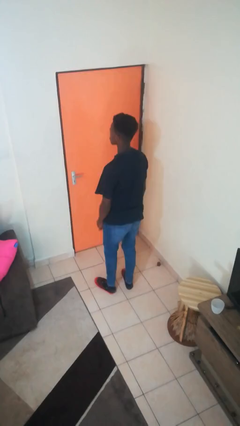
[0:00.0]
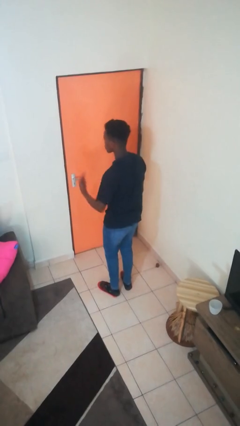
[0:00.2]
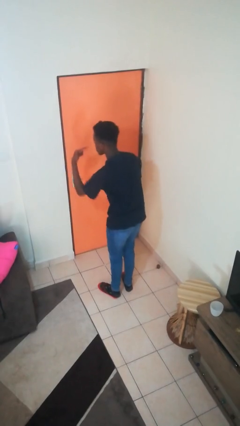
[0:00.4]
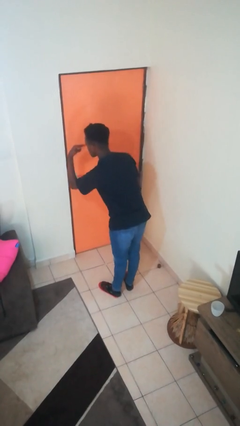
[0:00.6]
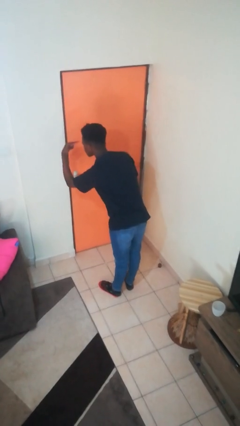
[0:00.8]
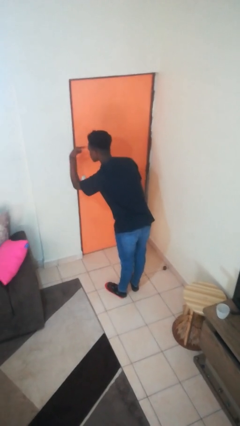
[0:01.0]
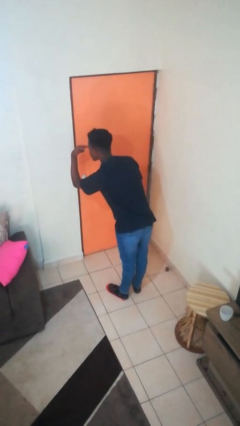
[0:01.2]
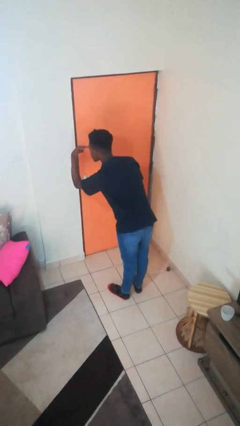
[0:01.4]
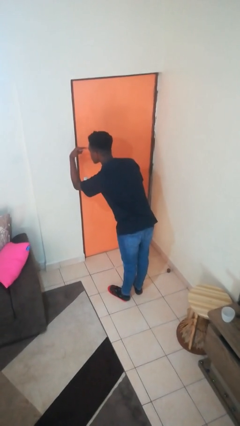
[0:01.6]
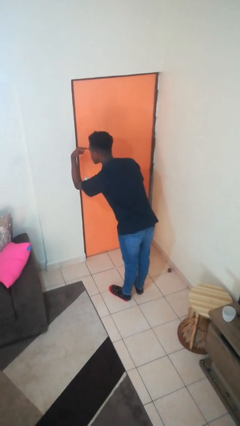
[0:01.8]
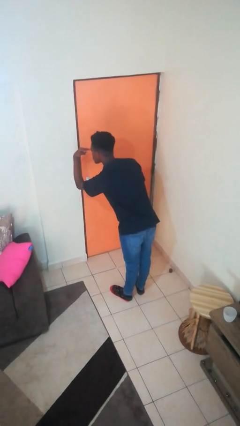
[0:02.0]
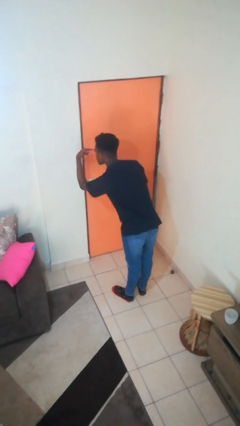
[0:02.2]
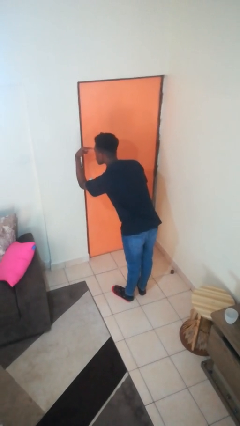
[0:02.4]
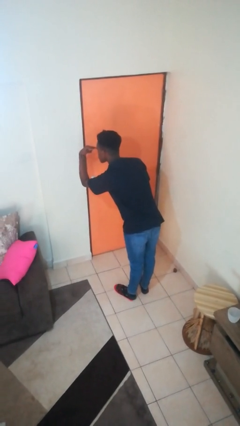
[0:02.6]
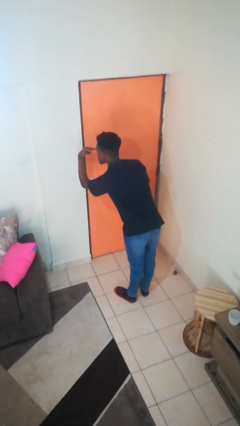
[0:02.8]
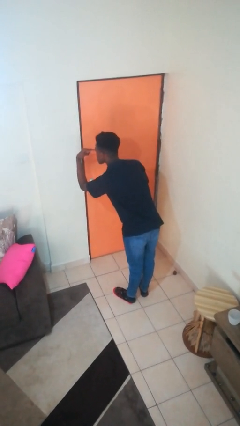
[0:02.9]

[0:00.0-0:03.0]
person gestures watch closely

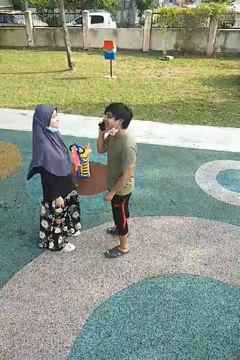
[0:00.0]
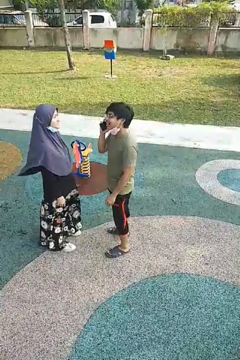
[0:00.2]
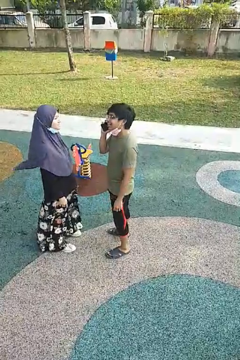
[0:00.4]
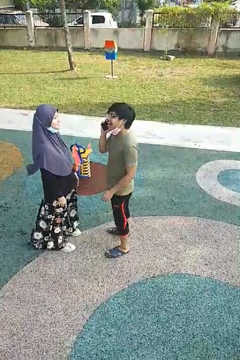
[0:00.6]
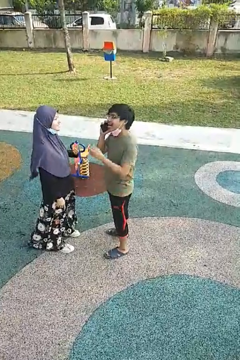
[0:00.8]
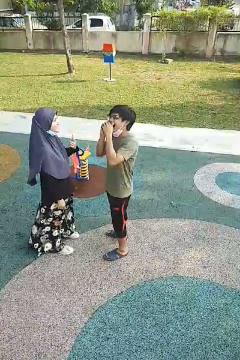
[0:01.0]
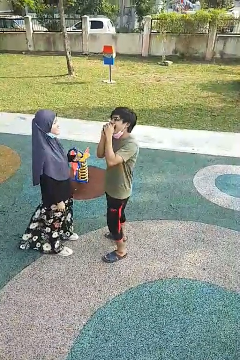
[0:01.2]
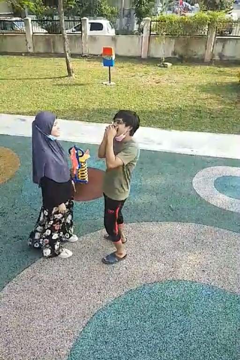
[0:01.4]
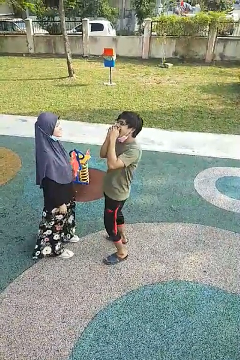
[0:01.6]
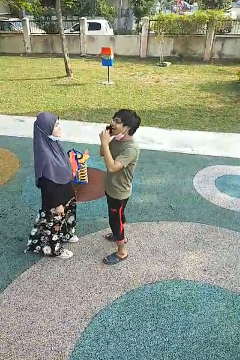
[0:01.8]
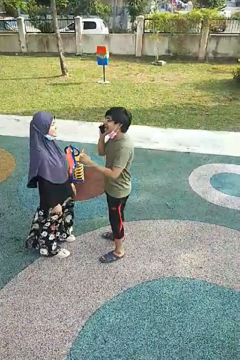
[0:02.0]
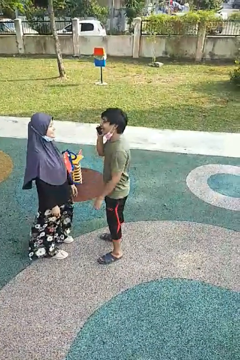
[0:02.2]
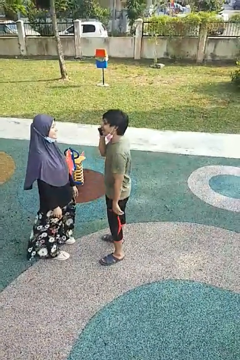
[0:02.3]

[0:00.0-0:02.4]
person laughs with person

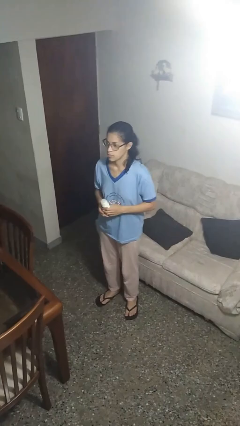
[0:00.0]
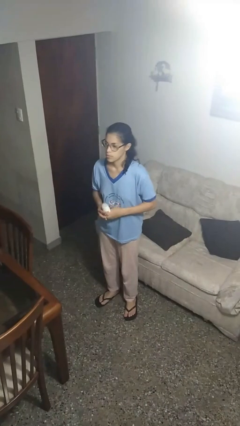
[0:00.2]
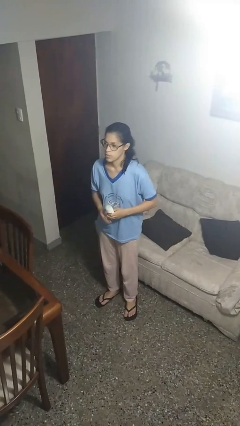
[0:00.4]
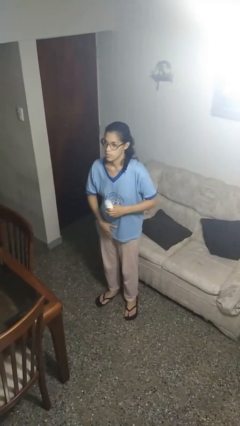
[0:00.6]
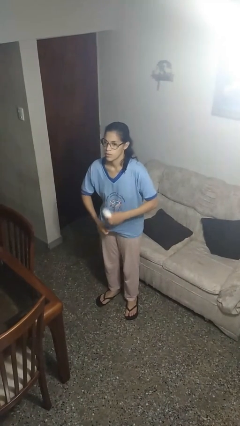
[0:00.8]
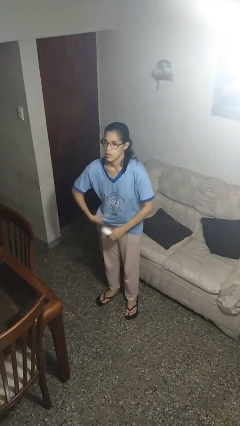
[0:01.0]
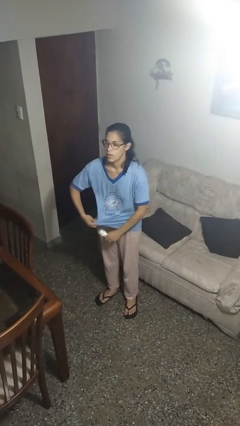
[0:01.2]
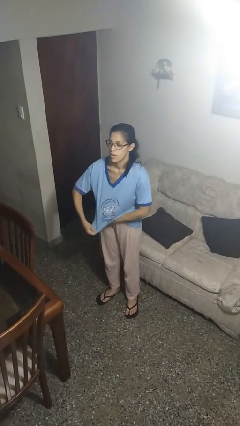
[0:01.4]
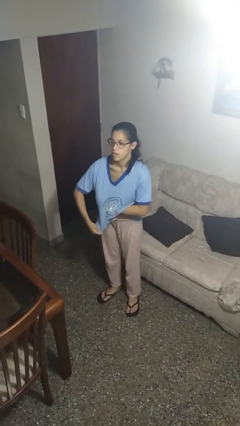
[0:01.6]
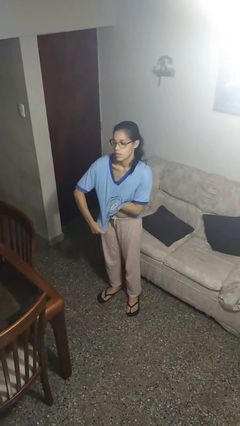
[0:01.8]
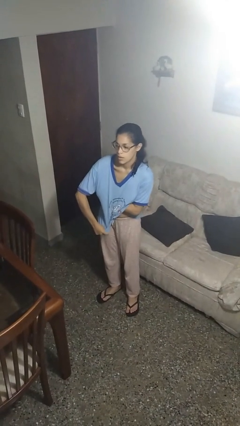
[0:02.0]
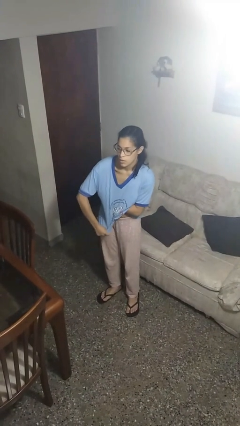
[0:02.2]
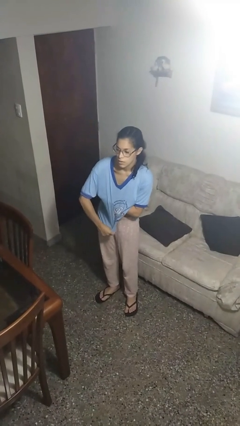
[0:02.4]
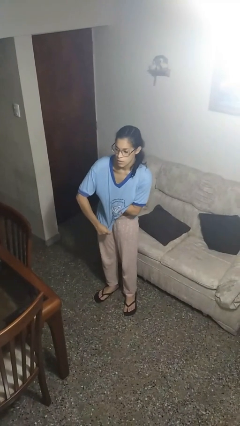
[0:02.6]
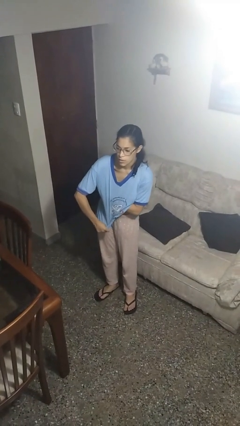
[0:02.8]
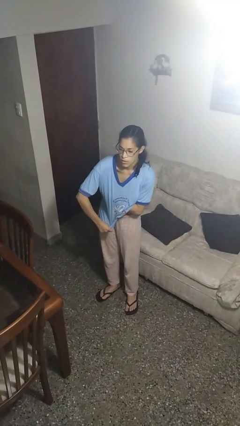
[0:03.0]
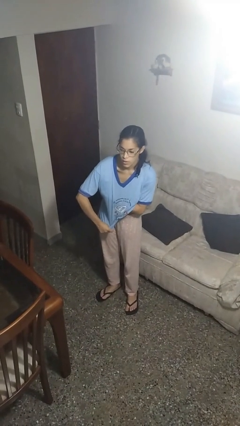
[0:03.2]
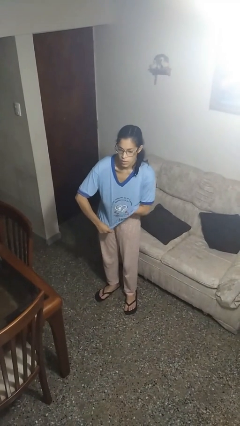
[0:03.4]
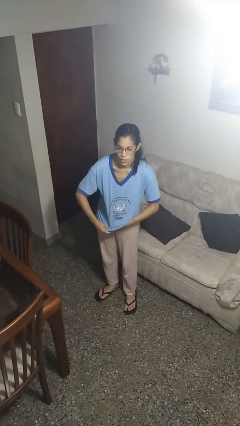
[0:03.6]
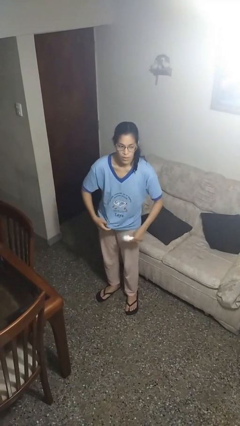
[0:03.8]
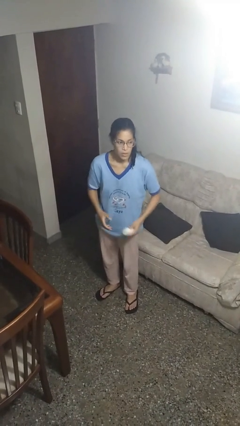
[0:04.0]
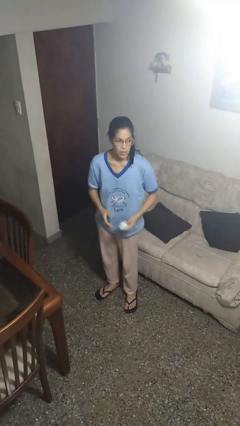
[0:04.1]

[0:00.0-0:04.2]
person applies deodorant

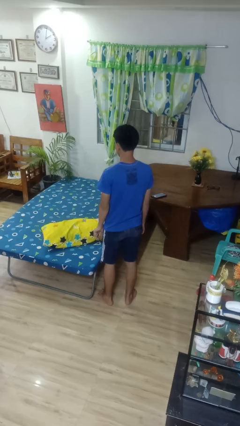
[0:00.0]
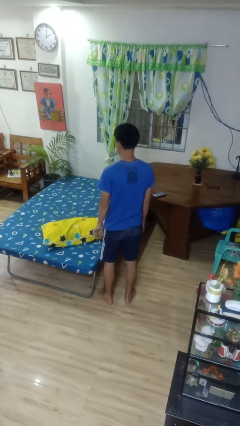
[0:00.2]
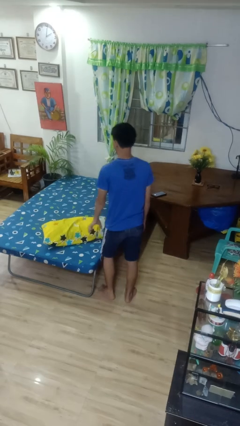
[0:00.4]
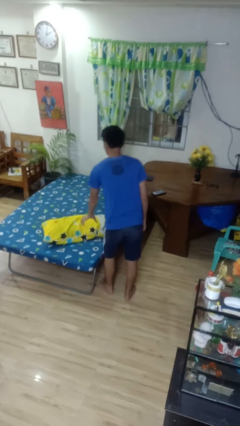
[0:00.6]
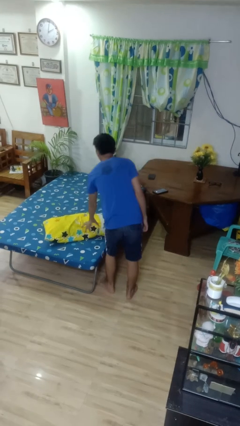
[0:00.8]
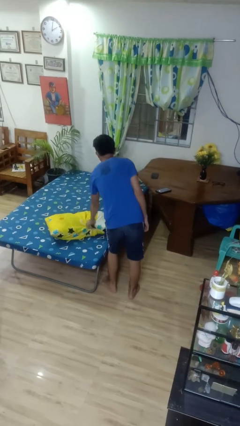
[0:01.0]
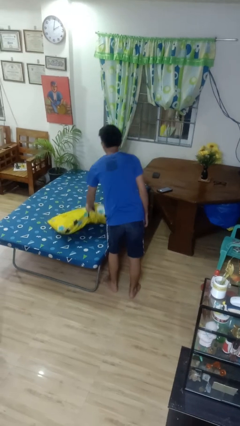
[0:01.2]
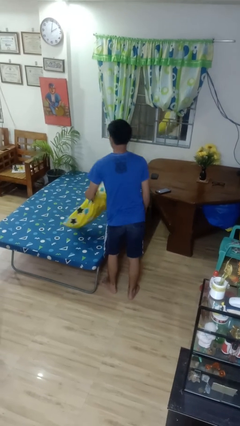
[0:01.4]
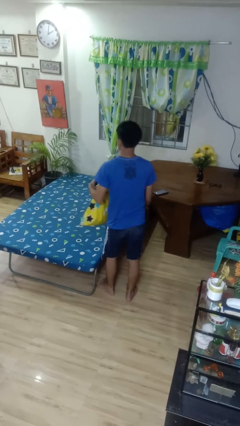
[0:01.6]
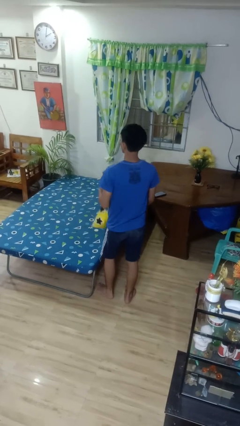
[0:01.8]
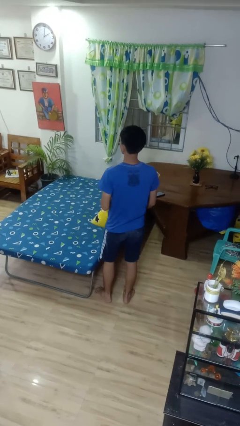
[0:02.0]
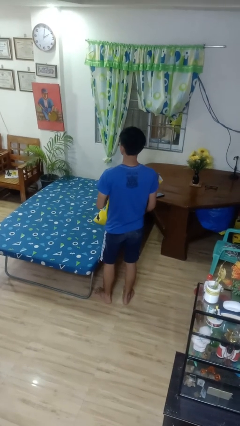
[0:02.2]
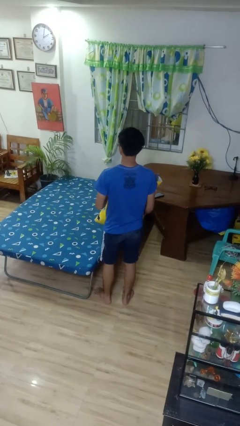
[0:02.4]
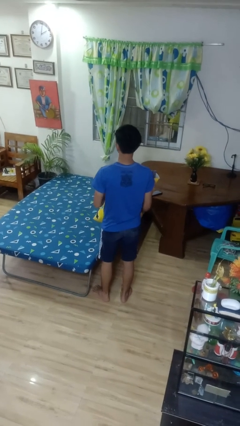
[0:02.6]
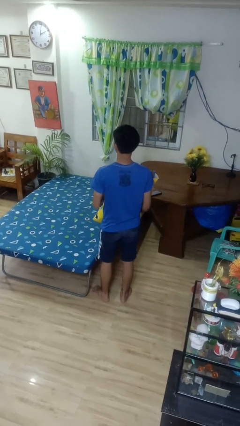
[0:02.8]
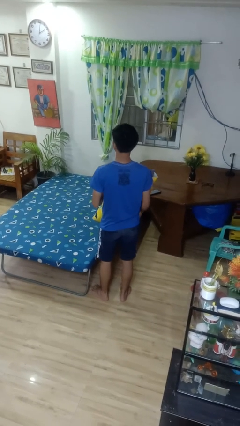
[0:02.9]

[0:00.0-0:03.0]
person picks up object from bed

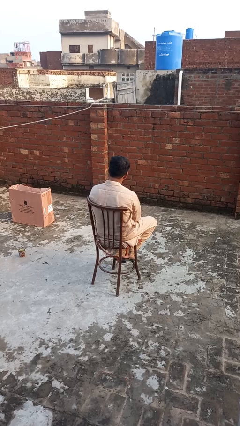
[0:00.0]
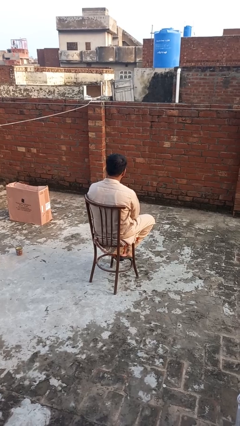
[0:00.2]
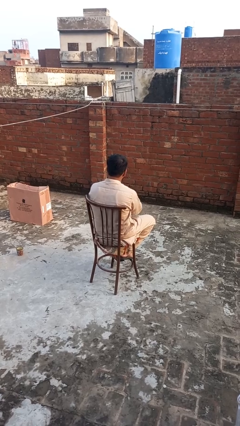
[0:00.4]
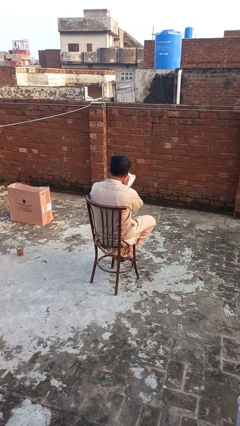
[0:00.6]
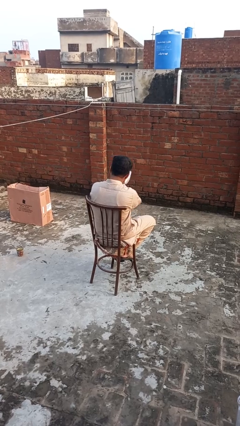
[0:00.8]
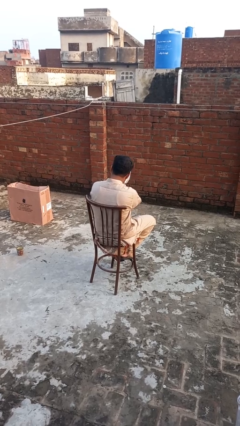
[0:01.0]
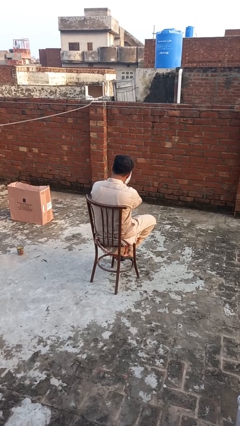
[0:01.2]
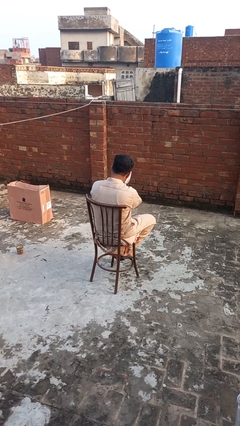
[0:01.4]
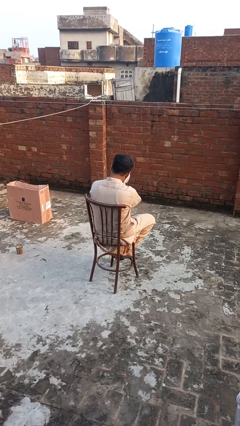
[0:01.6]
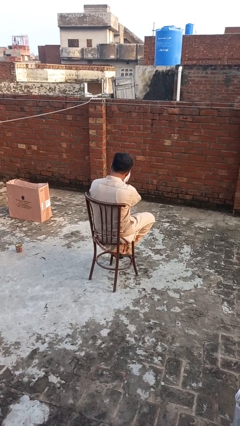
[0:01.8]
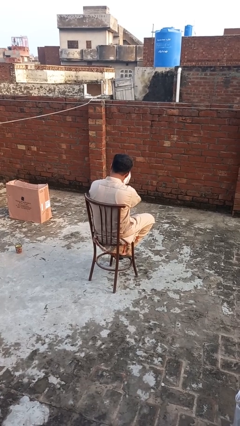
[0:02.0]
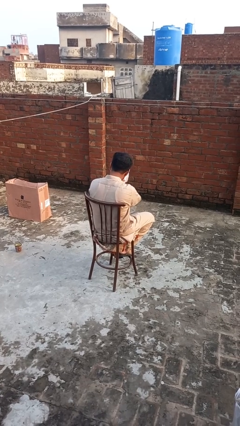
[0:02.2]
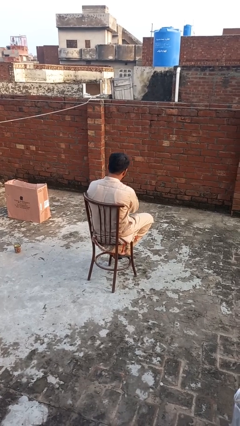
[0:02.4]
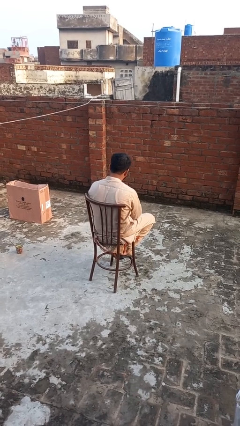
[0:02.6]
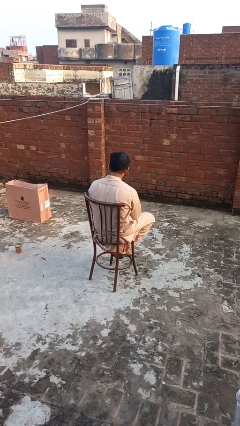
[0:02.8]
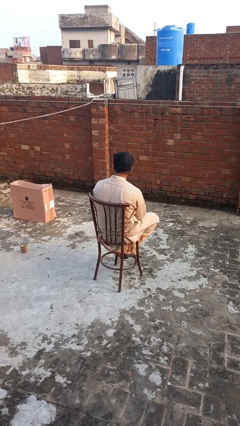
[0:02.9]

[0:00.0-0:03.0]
person blows nose

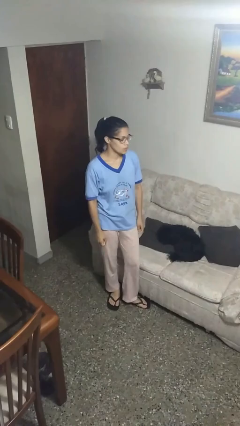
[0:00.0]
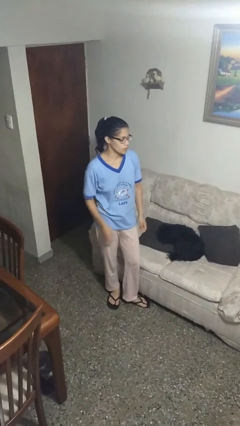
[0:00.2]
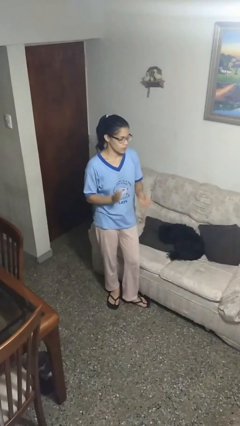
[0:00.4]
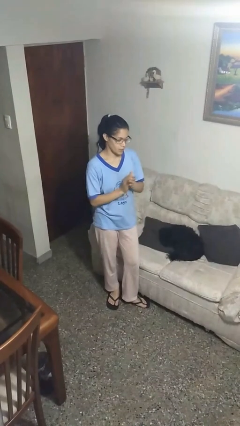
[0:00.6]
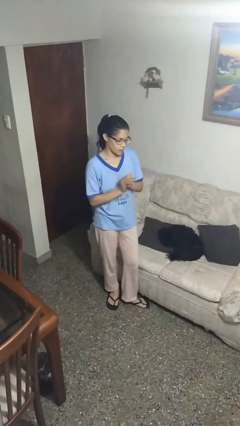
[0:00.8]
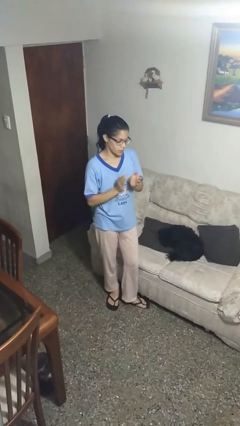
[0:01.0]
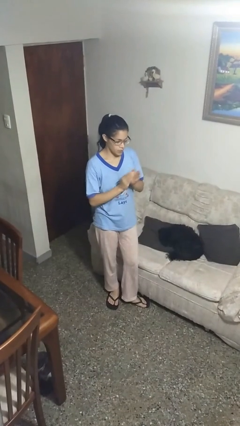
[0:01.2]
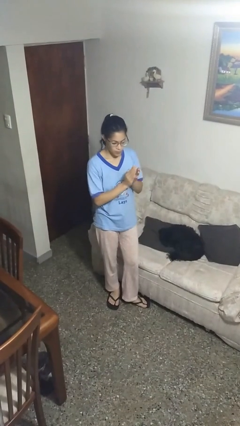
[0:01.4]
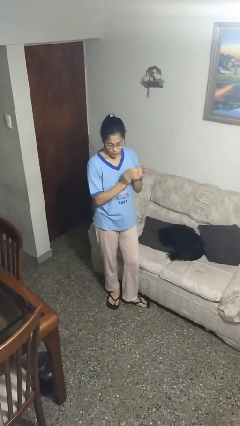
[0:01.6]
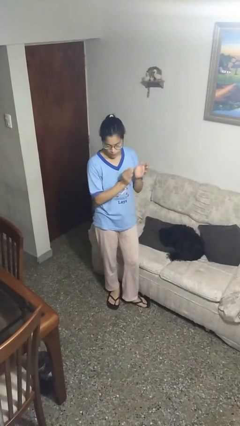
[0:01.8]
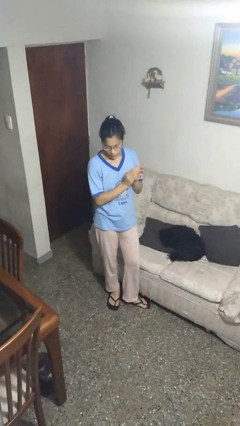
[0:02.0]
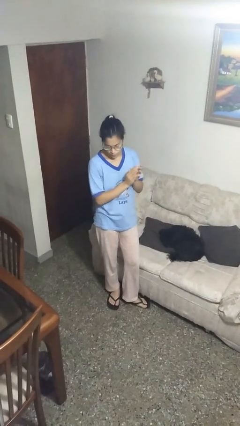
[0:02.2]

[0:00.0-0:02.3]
person claps hands
